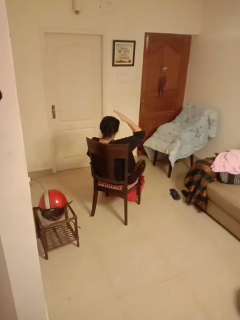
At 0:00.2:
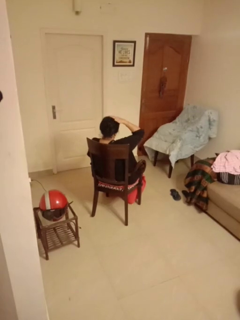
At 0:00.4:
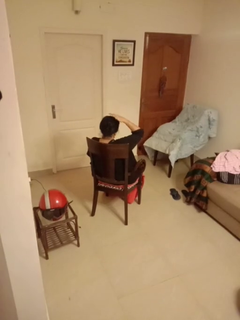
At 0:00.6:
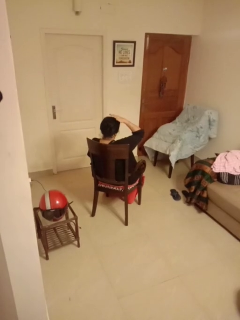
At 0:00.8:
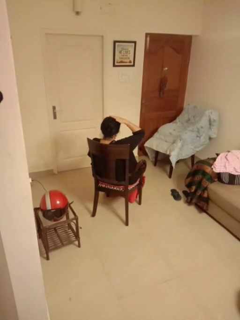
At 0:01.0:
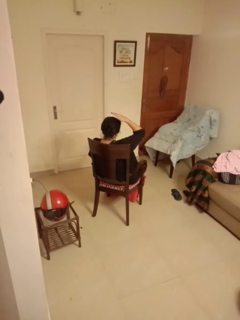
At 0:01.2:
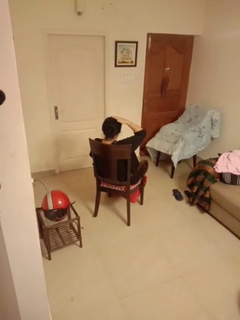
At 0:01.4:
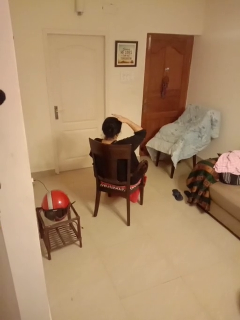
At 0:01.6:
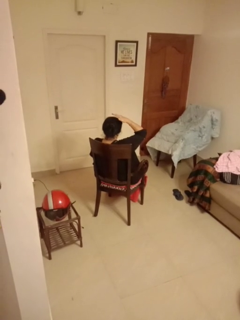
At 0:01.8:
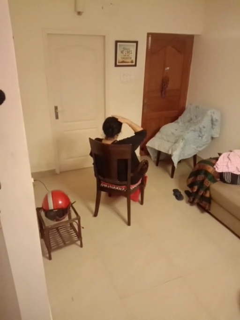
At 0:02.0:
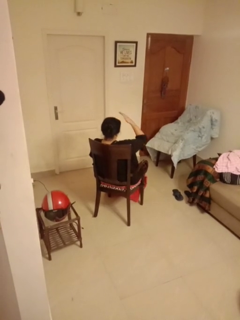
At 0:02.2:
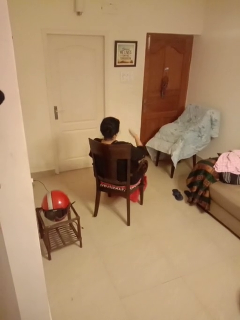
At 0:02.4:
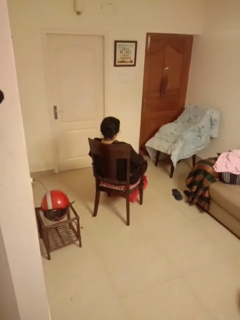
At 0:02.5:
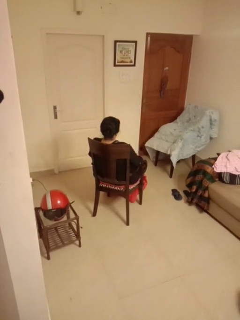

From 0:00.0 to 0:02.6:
person pats head

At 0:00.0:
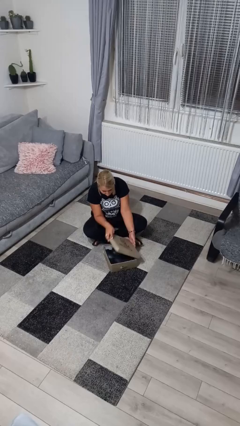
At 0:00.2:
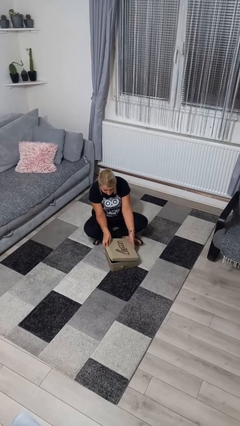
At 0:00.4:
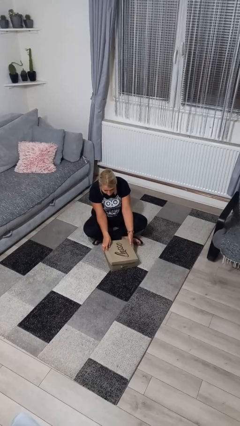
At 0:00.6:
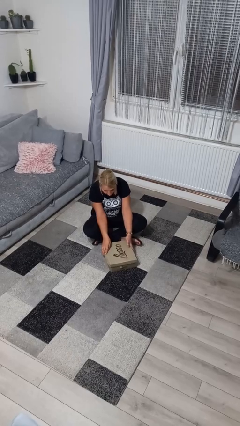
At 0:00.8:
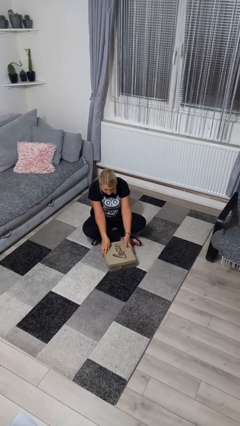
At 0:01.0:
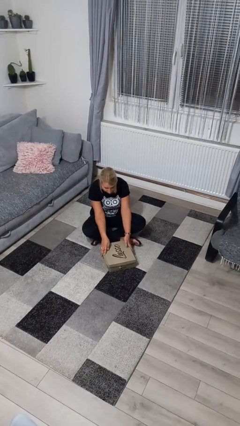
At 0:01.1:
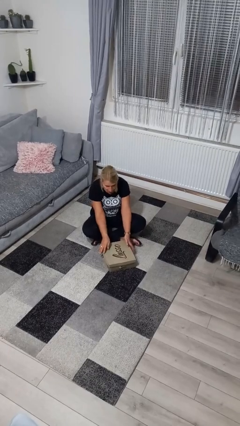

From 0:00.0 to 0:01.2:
person closes box

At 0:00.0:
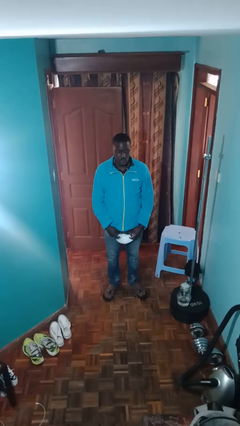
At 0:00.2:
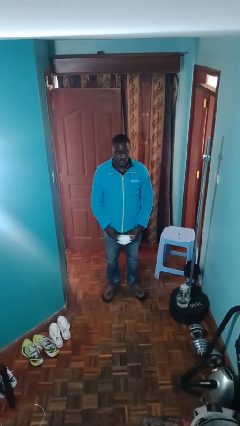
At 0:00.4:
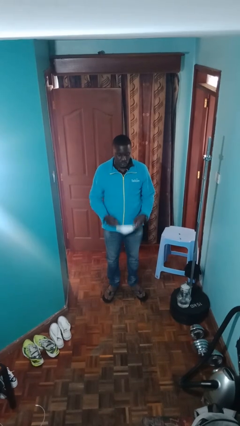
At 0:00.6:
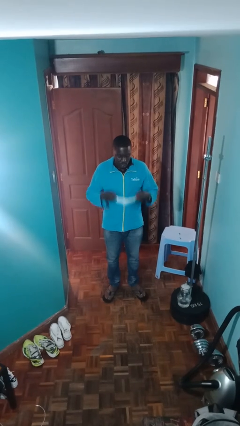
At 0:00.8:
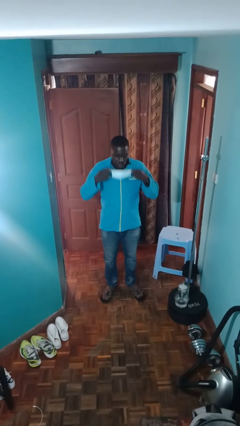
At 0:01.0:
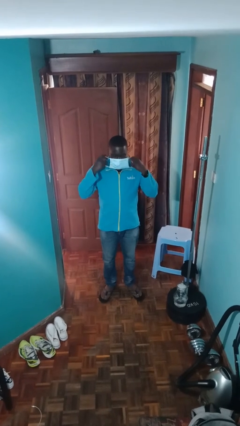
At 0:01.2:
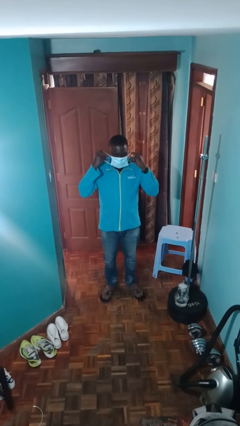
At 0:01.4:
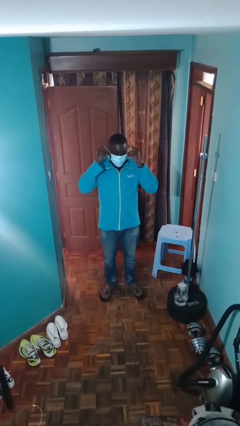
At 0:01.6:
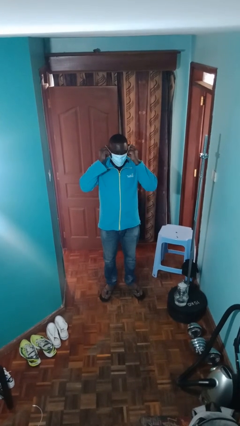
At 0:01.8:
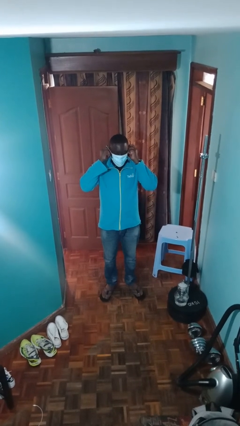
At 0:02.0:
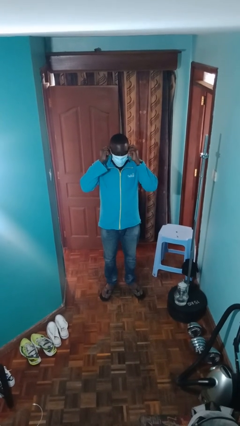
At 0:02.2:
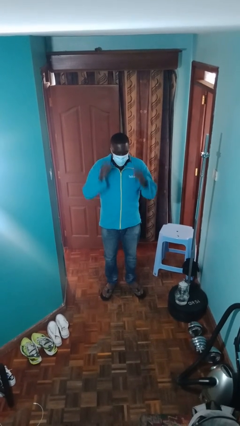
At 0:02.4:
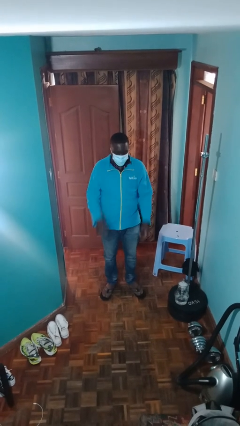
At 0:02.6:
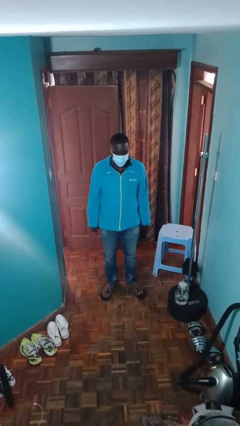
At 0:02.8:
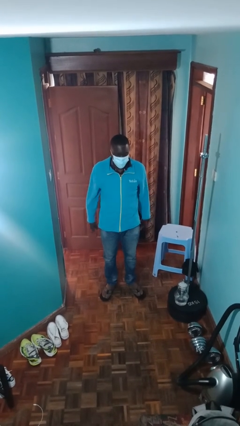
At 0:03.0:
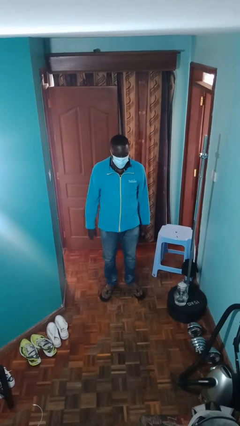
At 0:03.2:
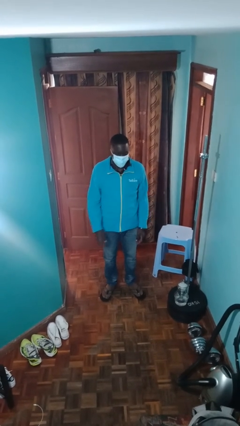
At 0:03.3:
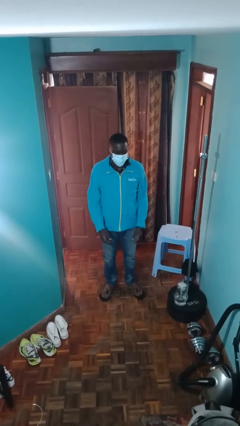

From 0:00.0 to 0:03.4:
person puts on facemask

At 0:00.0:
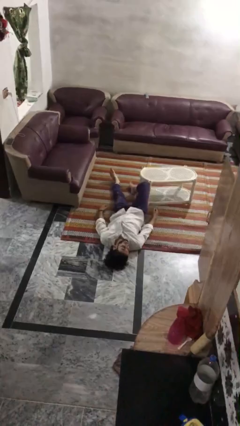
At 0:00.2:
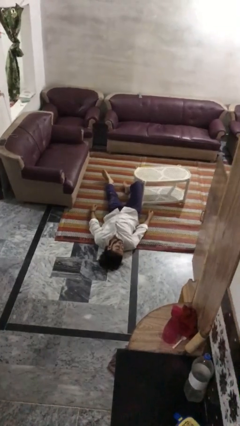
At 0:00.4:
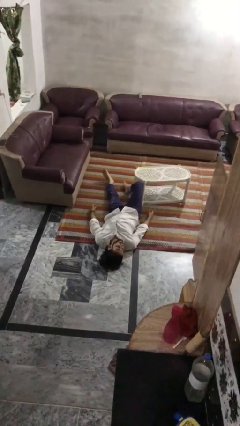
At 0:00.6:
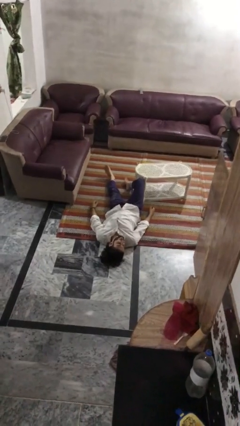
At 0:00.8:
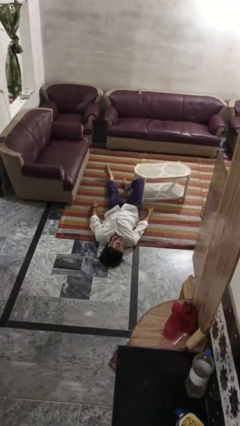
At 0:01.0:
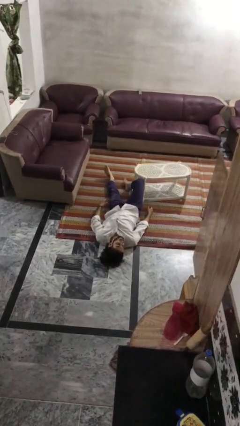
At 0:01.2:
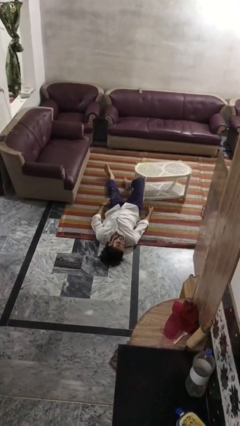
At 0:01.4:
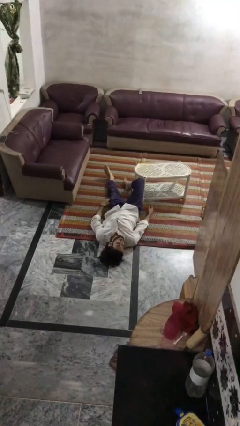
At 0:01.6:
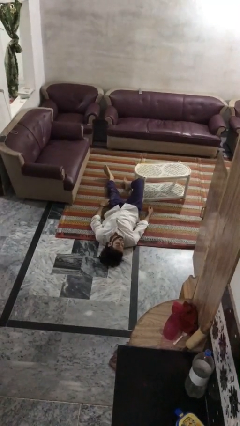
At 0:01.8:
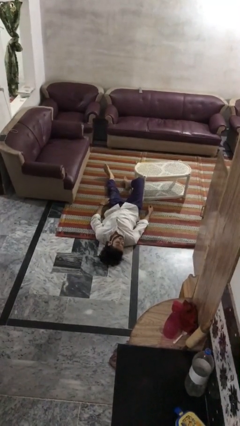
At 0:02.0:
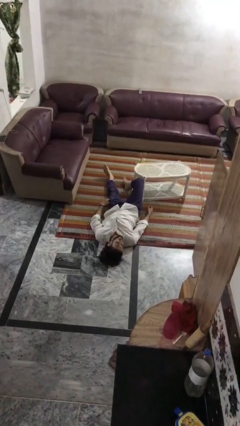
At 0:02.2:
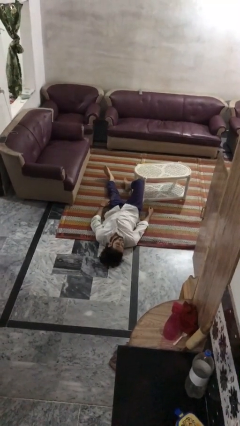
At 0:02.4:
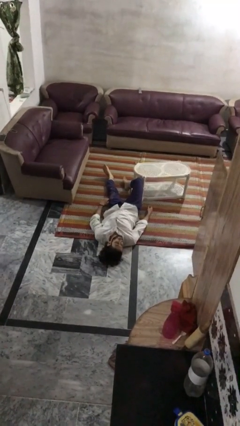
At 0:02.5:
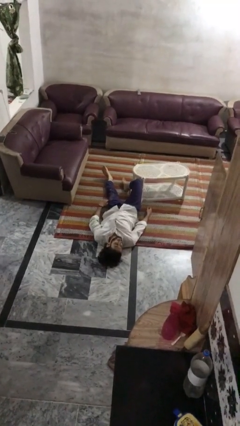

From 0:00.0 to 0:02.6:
person lies down on floor

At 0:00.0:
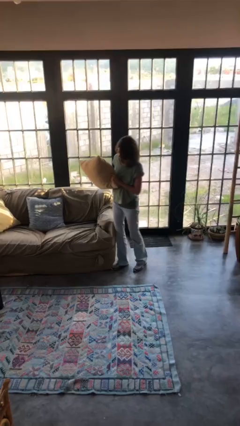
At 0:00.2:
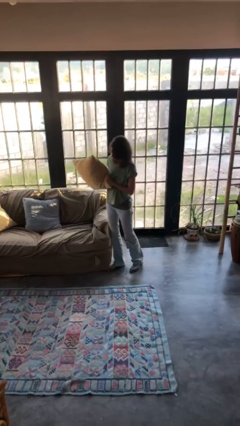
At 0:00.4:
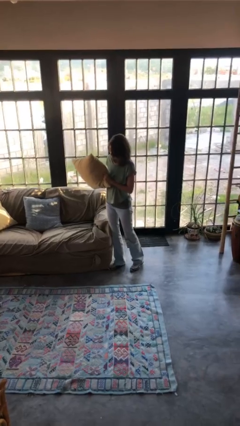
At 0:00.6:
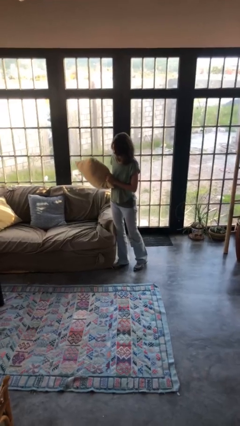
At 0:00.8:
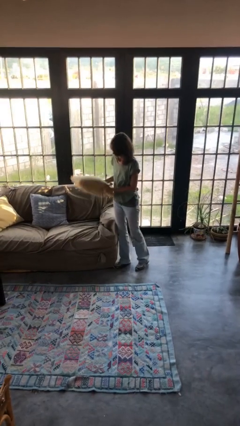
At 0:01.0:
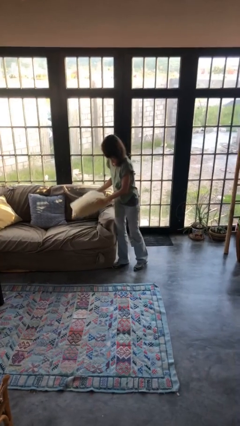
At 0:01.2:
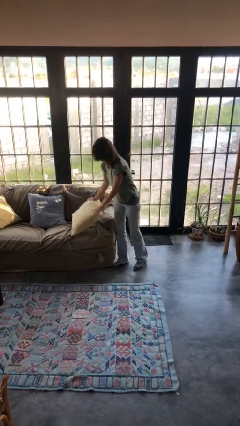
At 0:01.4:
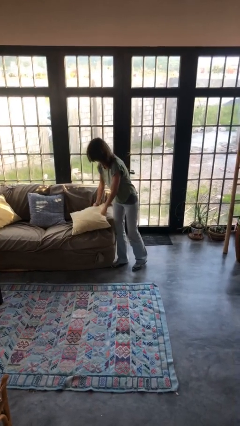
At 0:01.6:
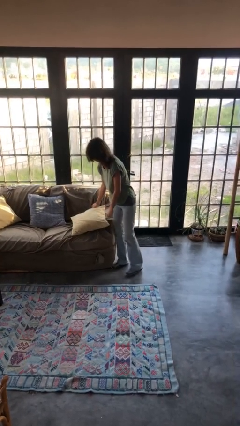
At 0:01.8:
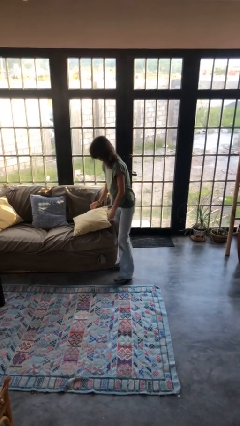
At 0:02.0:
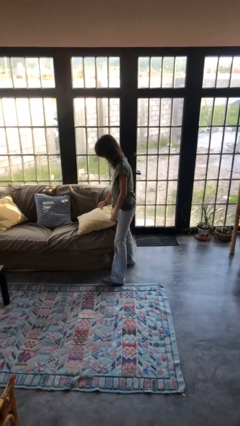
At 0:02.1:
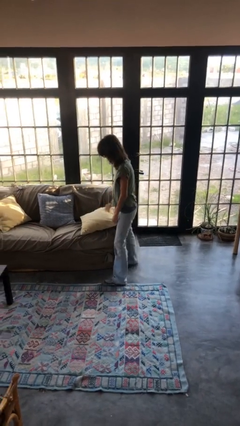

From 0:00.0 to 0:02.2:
person puts down object on couch

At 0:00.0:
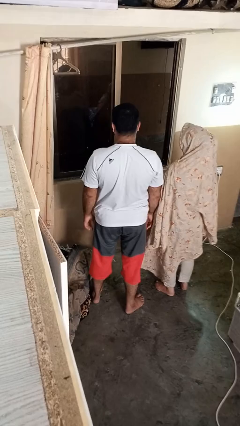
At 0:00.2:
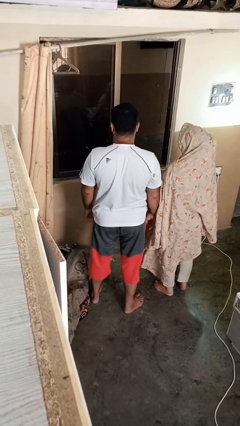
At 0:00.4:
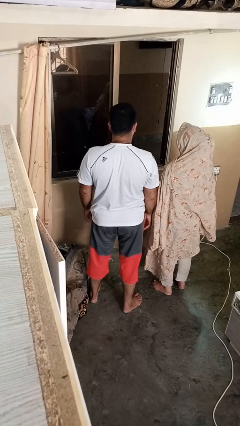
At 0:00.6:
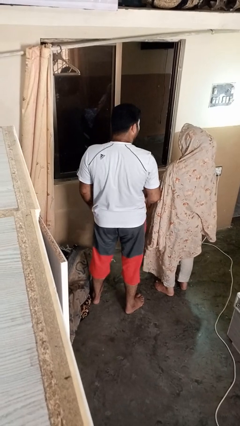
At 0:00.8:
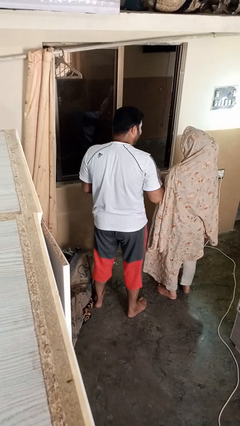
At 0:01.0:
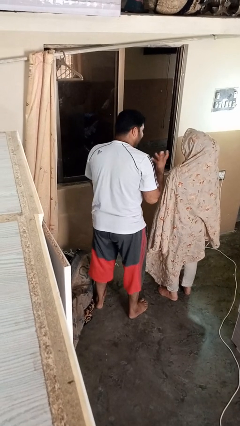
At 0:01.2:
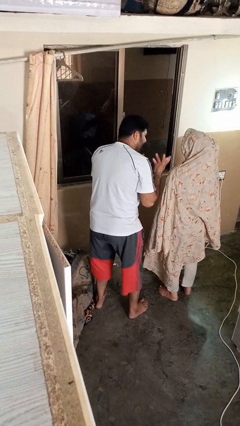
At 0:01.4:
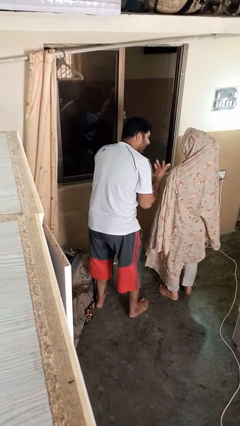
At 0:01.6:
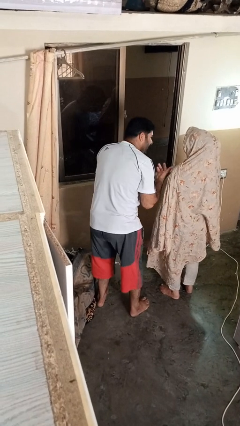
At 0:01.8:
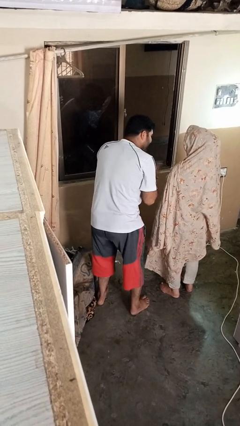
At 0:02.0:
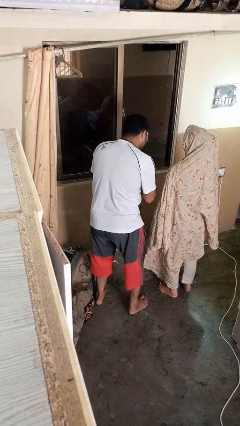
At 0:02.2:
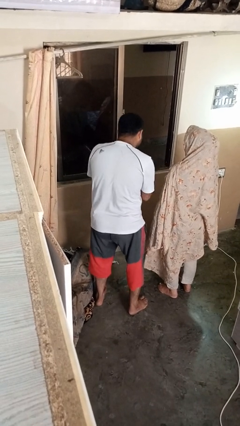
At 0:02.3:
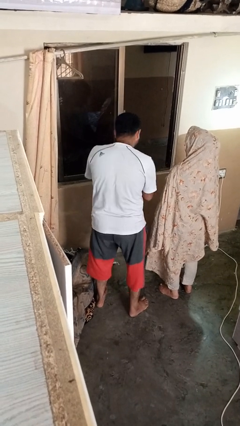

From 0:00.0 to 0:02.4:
person laughs with person

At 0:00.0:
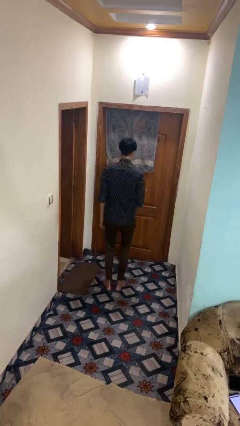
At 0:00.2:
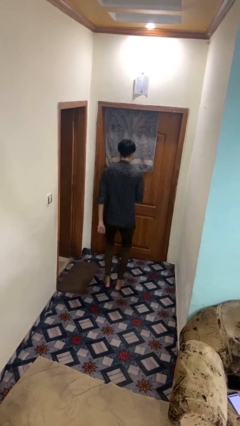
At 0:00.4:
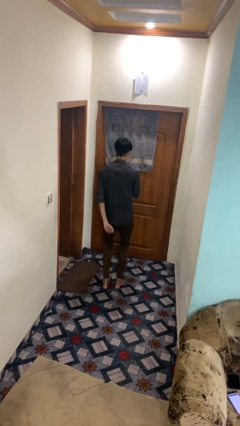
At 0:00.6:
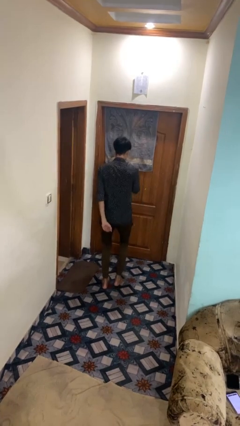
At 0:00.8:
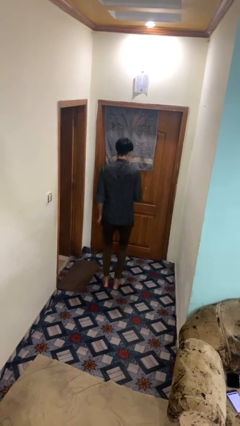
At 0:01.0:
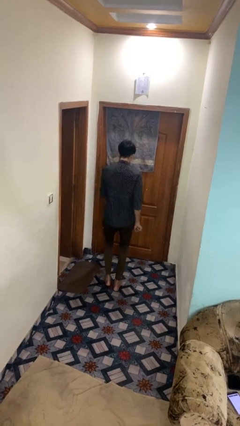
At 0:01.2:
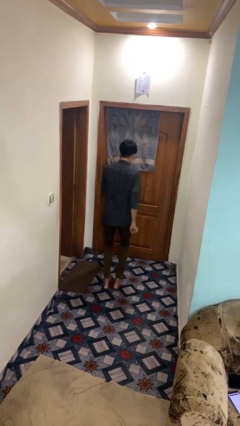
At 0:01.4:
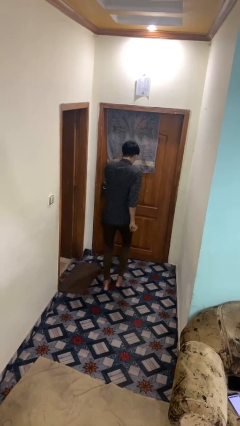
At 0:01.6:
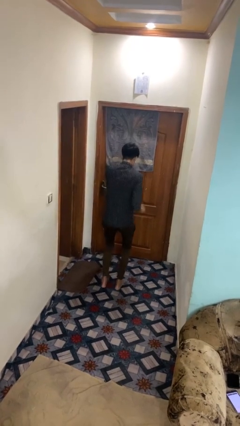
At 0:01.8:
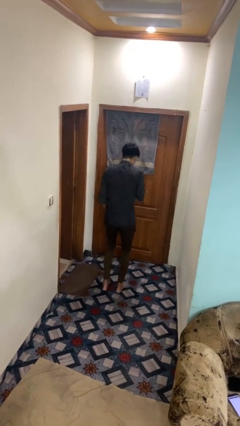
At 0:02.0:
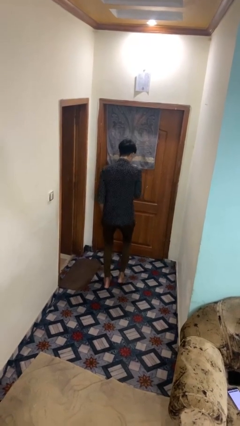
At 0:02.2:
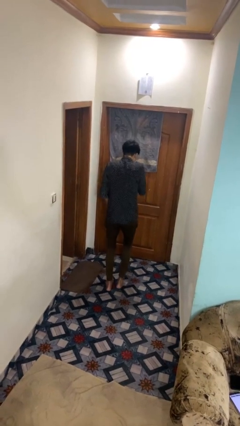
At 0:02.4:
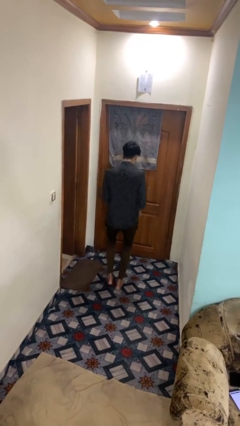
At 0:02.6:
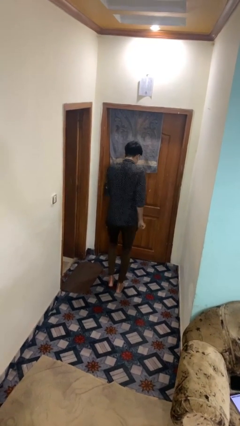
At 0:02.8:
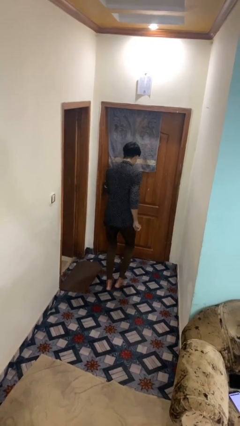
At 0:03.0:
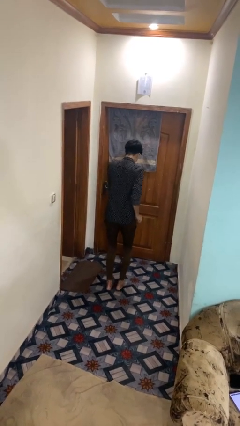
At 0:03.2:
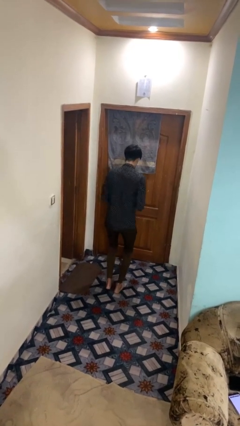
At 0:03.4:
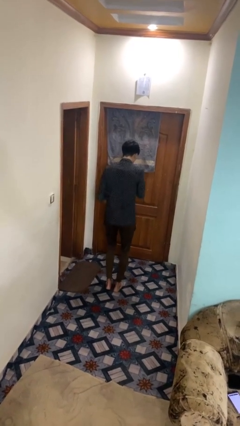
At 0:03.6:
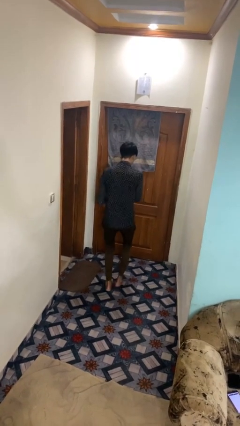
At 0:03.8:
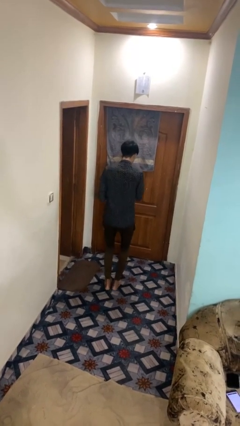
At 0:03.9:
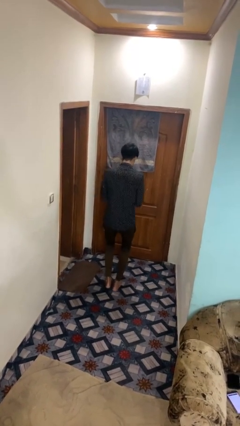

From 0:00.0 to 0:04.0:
person dances in place
